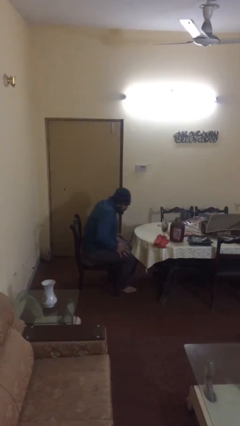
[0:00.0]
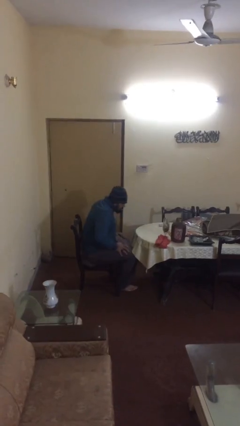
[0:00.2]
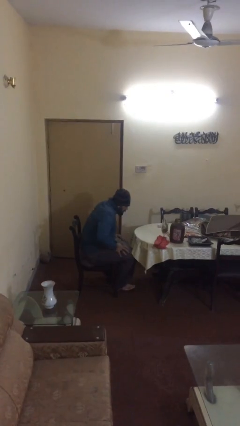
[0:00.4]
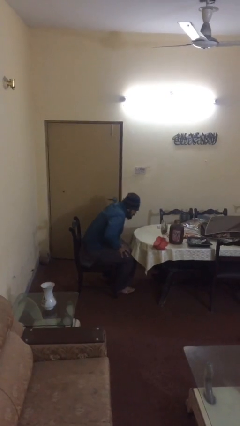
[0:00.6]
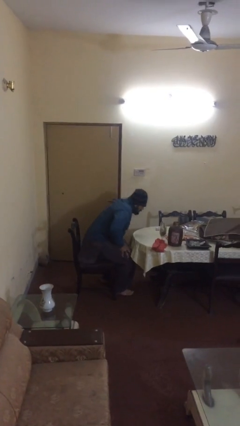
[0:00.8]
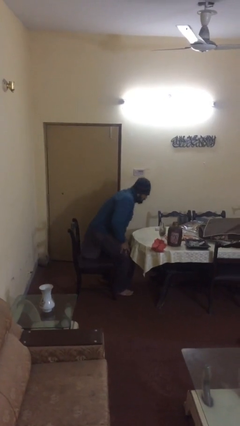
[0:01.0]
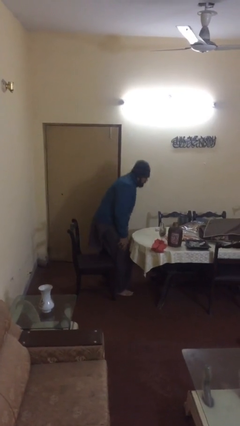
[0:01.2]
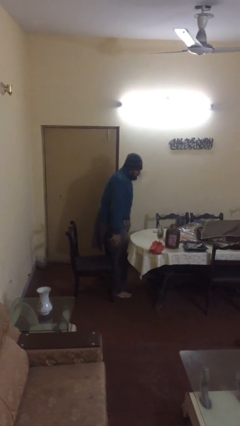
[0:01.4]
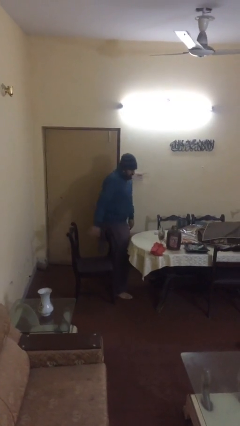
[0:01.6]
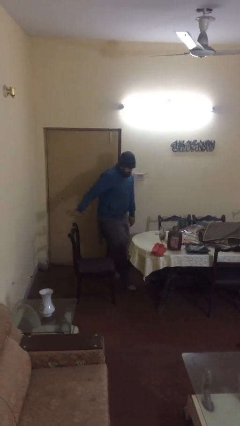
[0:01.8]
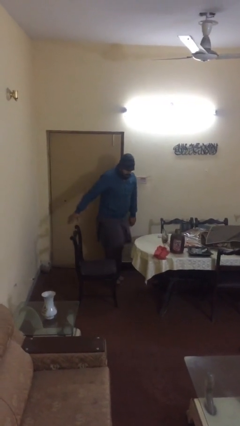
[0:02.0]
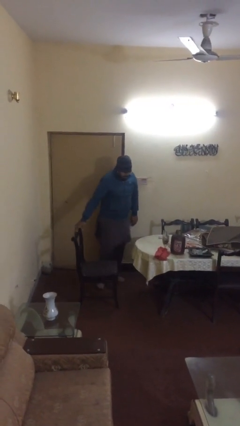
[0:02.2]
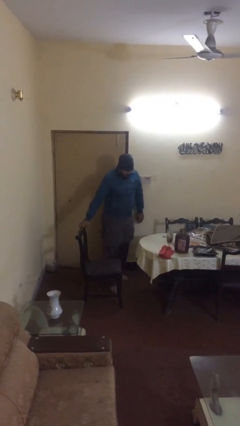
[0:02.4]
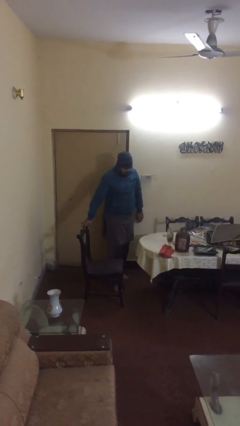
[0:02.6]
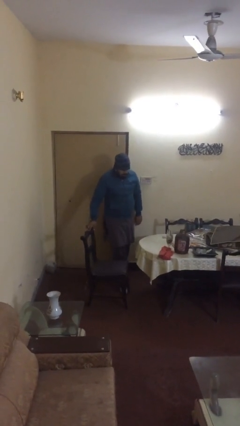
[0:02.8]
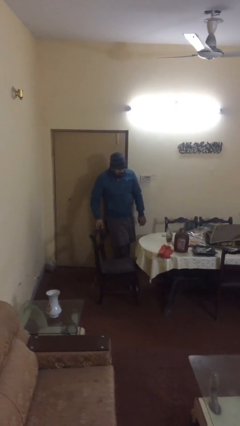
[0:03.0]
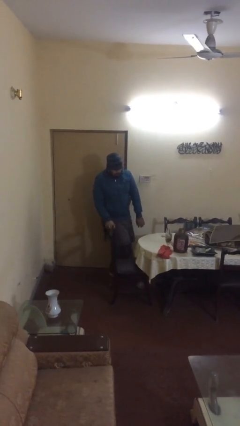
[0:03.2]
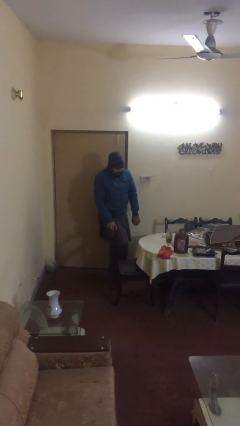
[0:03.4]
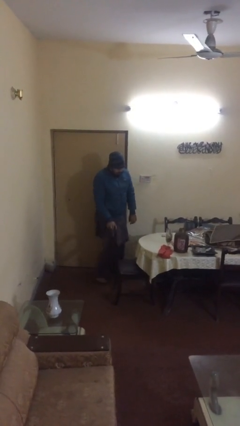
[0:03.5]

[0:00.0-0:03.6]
person stands up

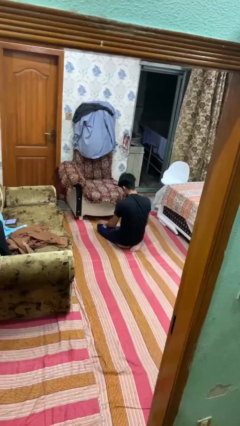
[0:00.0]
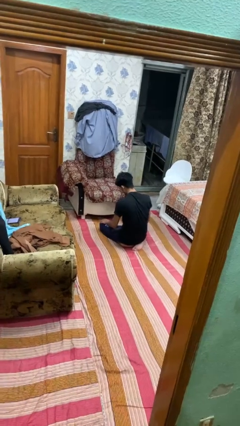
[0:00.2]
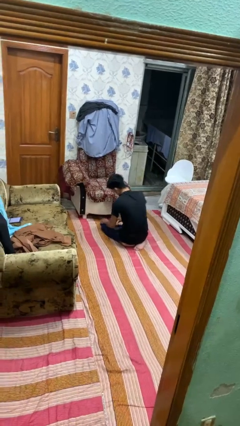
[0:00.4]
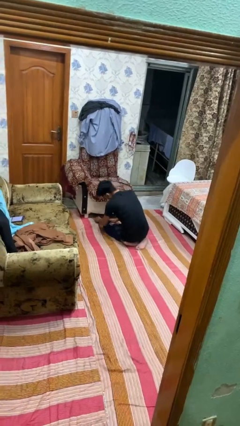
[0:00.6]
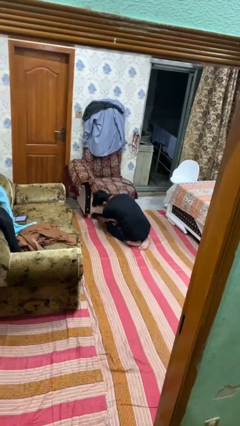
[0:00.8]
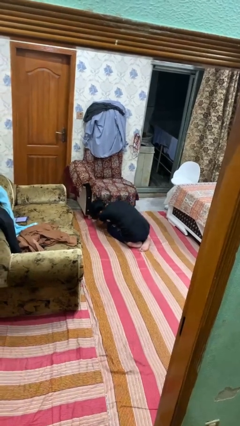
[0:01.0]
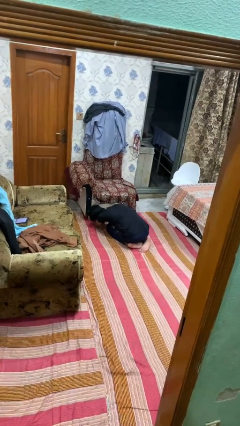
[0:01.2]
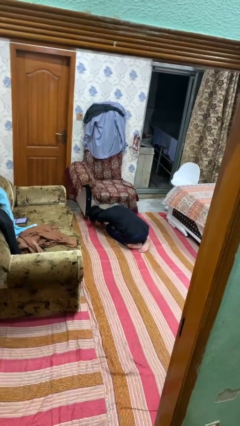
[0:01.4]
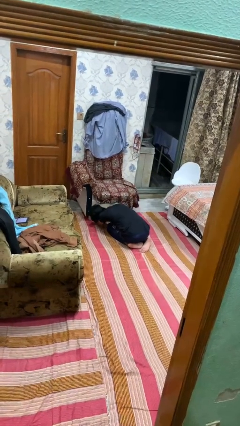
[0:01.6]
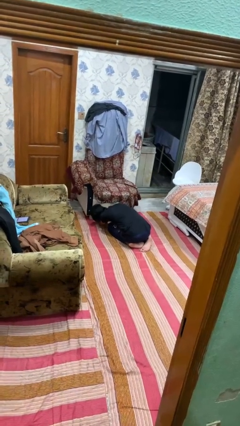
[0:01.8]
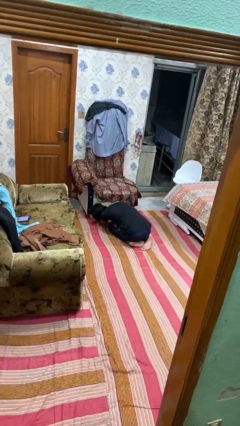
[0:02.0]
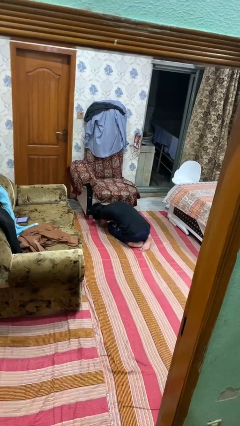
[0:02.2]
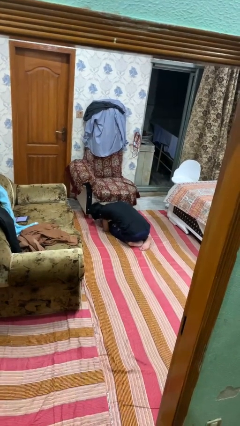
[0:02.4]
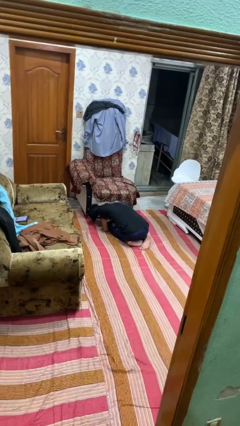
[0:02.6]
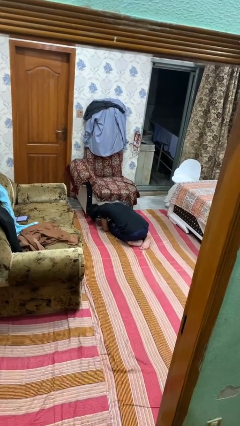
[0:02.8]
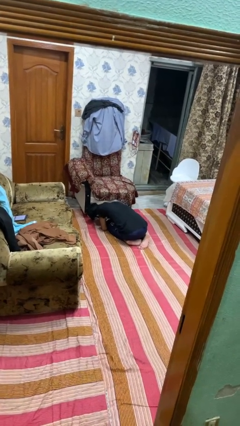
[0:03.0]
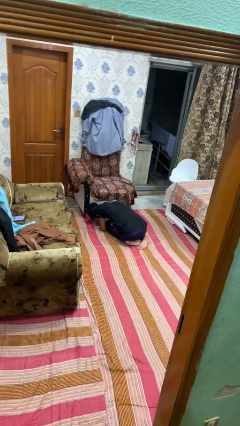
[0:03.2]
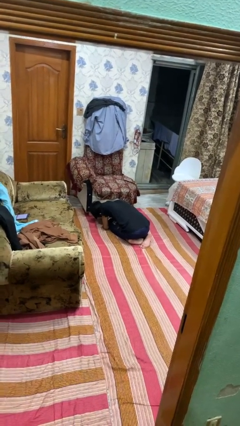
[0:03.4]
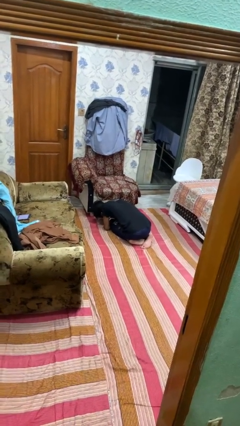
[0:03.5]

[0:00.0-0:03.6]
person searches under couch

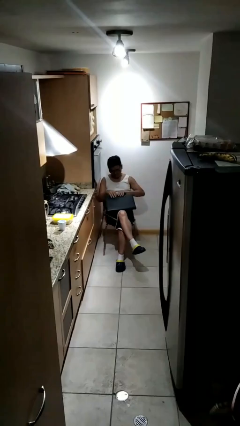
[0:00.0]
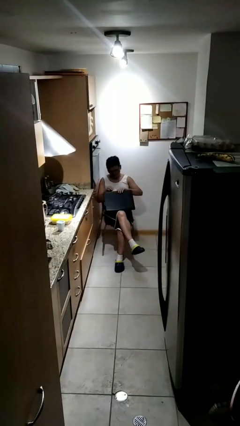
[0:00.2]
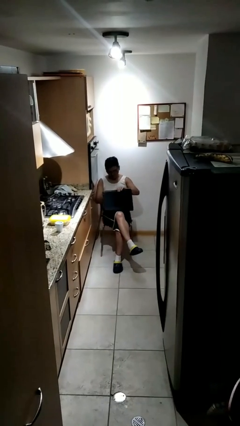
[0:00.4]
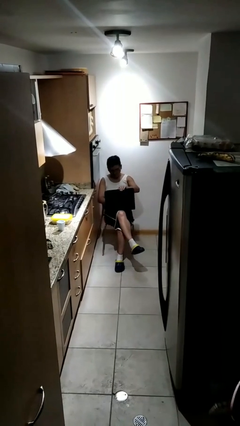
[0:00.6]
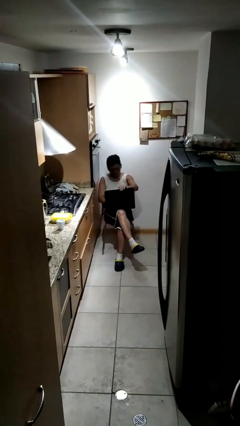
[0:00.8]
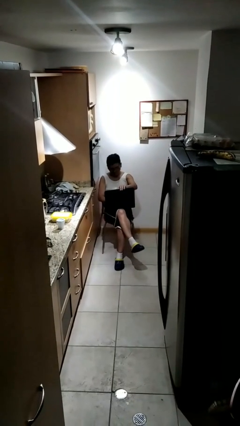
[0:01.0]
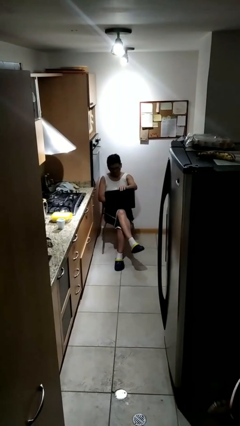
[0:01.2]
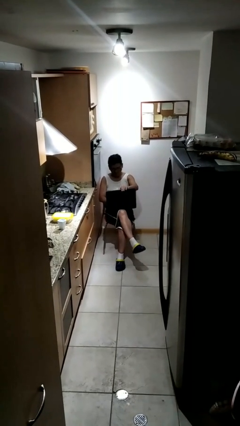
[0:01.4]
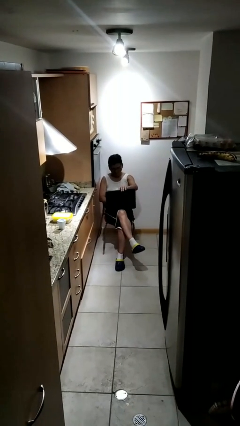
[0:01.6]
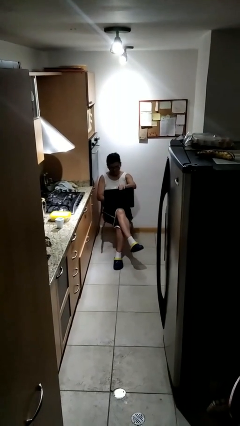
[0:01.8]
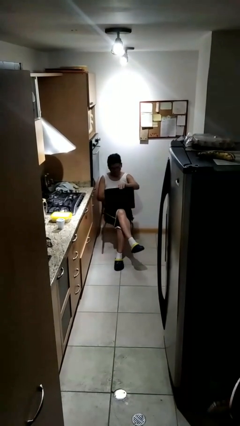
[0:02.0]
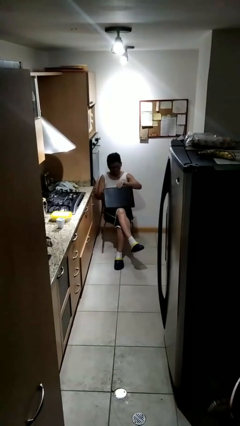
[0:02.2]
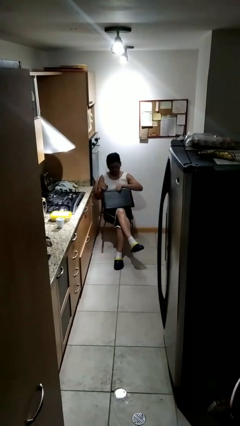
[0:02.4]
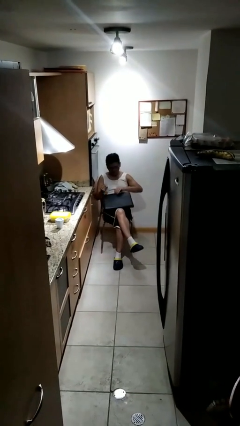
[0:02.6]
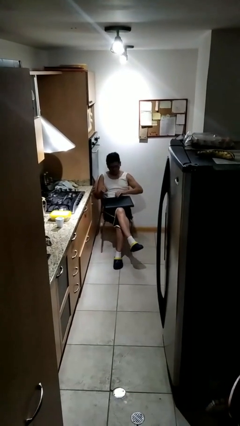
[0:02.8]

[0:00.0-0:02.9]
person interacts with laptop

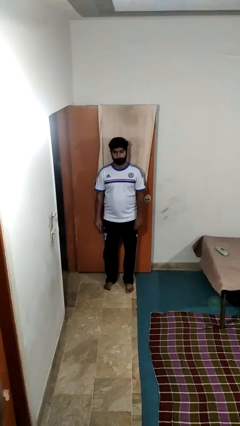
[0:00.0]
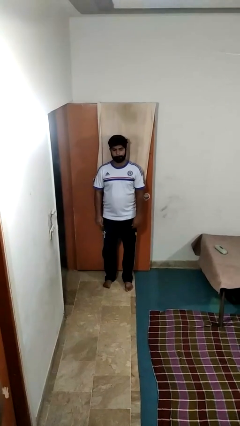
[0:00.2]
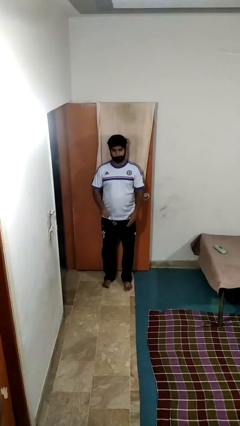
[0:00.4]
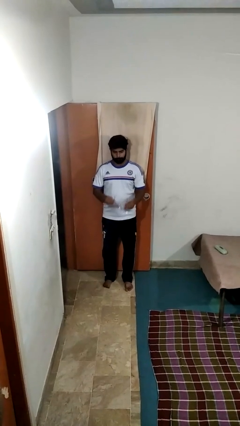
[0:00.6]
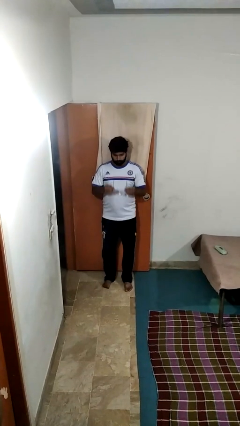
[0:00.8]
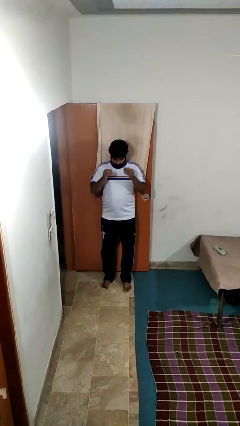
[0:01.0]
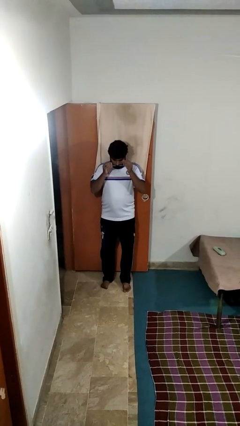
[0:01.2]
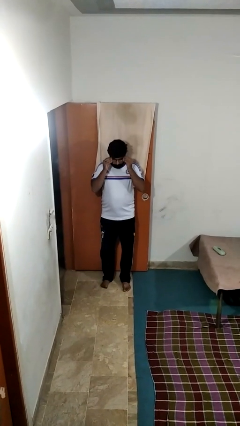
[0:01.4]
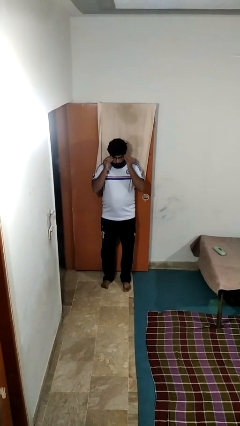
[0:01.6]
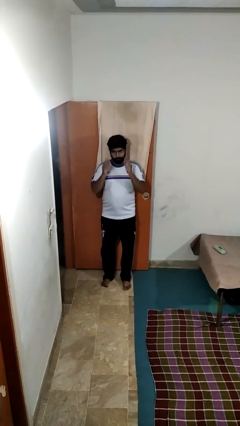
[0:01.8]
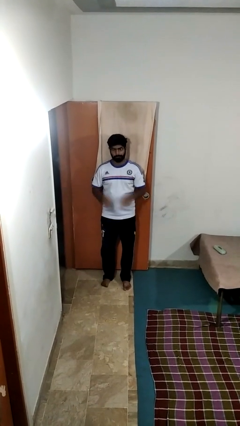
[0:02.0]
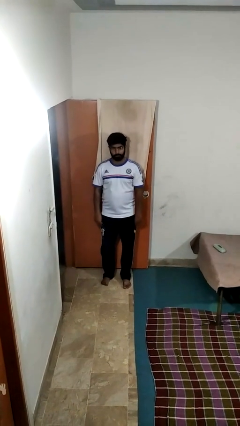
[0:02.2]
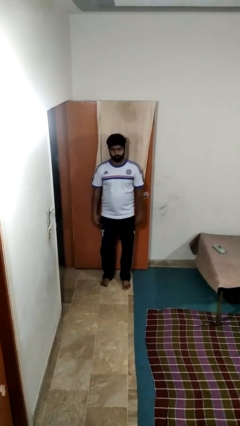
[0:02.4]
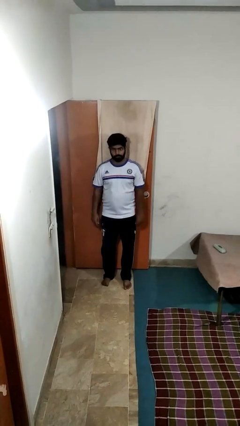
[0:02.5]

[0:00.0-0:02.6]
person puts on glasses

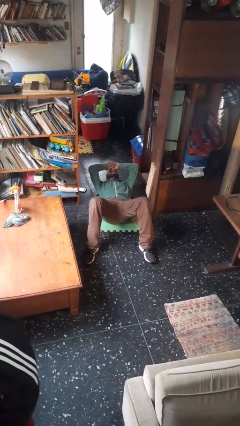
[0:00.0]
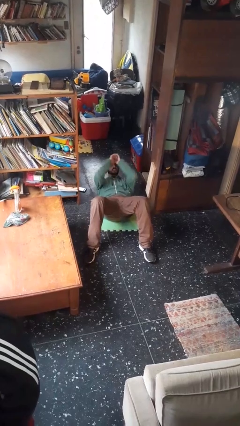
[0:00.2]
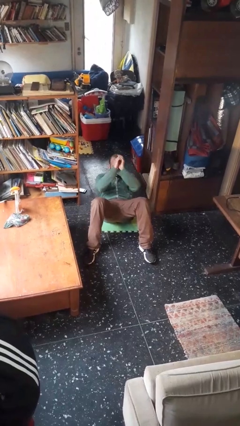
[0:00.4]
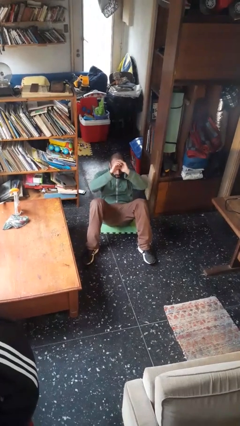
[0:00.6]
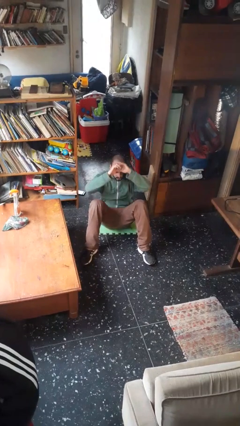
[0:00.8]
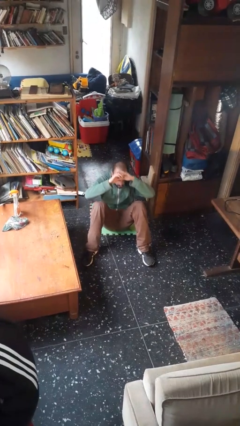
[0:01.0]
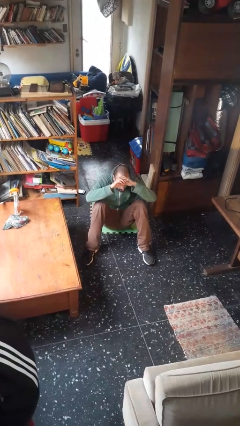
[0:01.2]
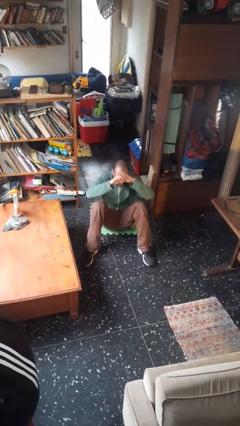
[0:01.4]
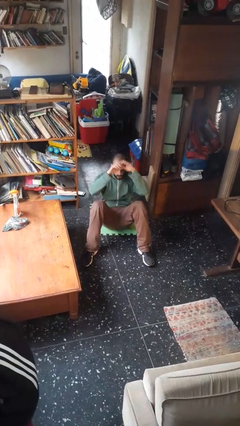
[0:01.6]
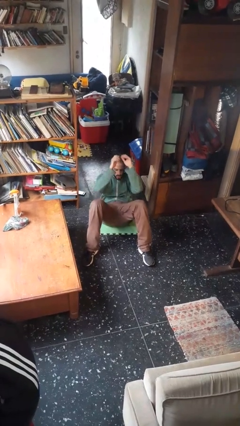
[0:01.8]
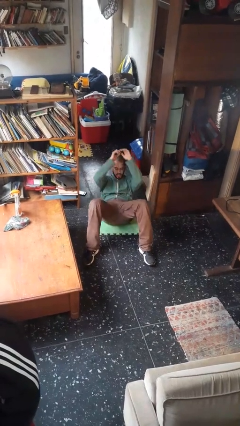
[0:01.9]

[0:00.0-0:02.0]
person exercises with situp

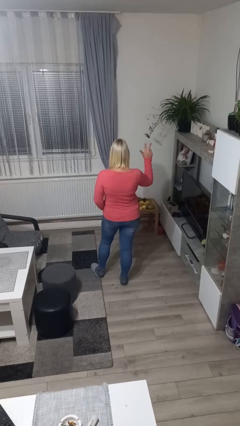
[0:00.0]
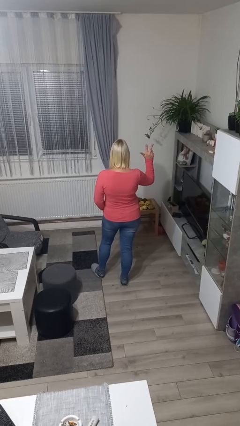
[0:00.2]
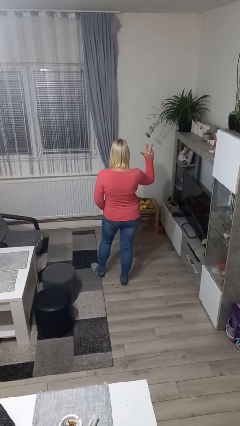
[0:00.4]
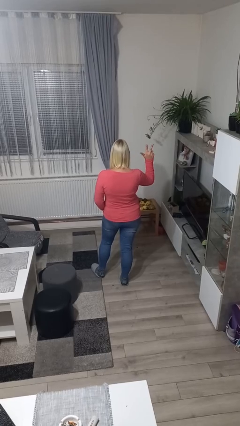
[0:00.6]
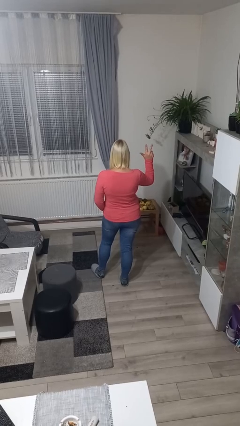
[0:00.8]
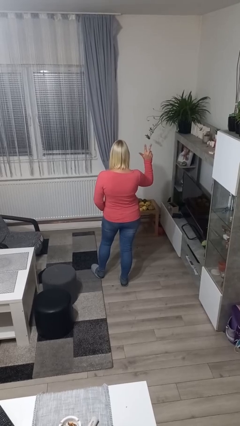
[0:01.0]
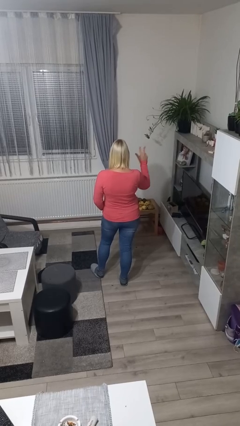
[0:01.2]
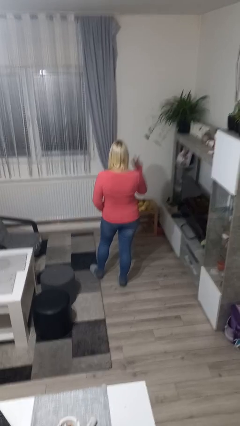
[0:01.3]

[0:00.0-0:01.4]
person gestures number three

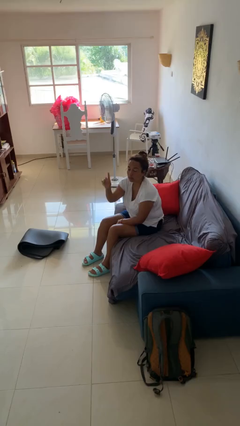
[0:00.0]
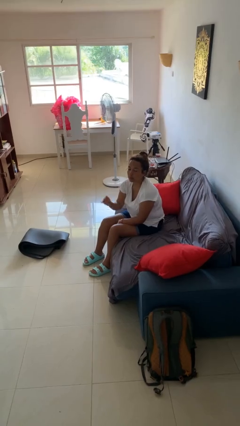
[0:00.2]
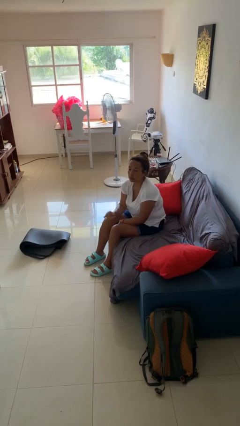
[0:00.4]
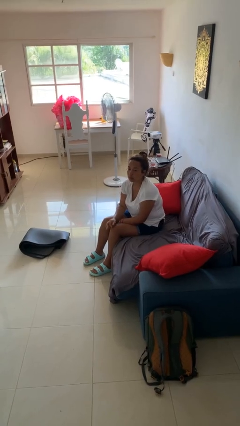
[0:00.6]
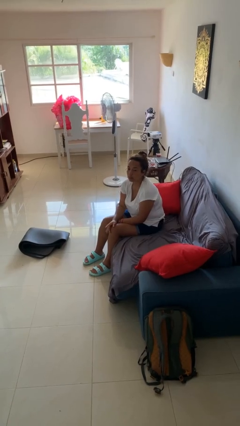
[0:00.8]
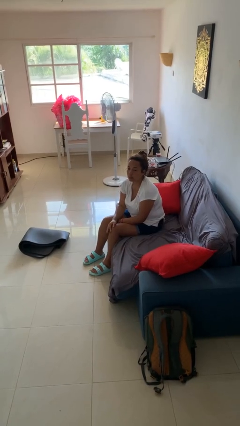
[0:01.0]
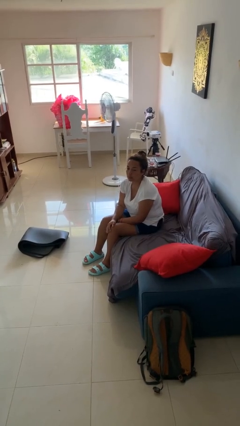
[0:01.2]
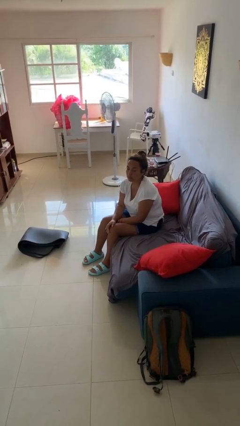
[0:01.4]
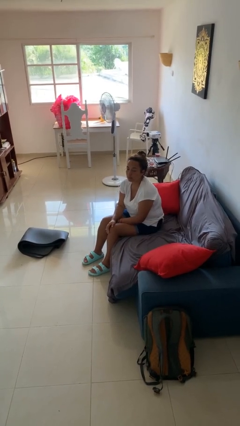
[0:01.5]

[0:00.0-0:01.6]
person gestures lower hand
